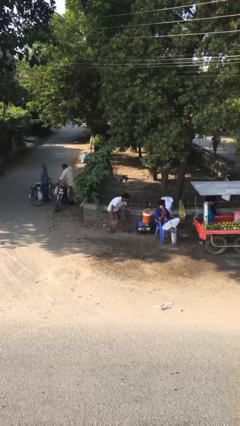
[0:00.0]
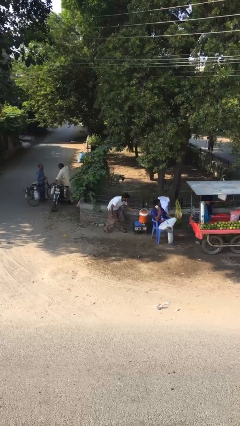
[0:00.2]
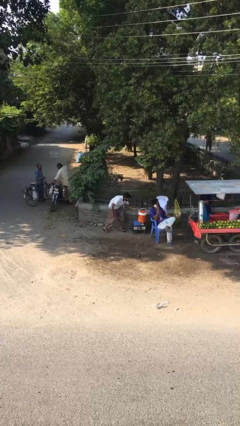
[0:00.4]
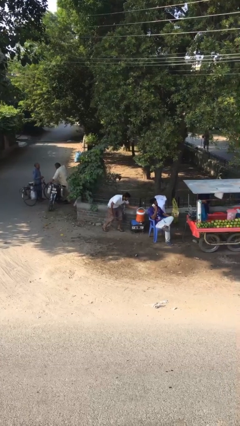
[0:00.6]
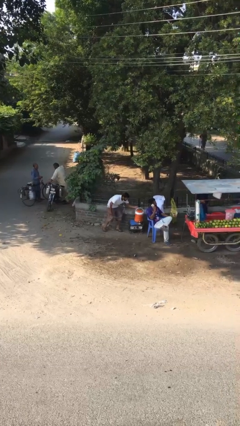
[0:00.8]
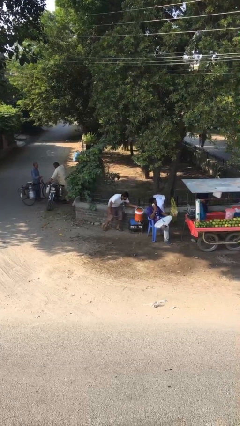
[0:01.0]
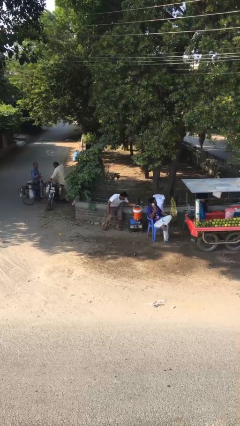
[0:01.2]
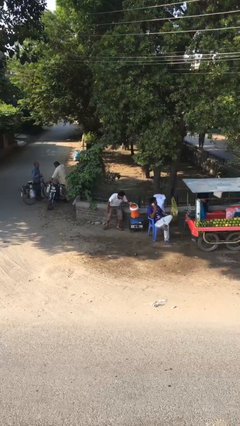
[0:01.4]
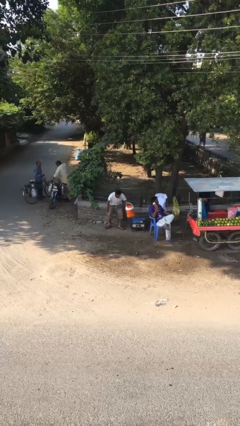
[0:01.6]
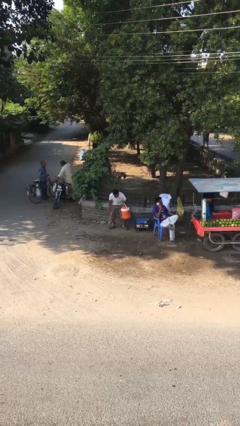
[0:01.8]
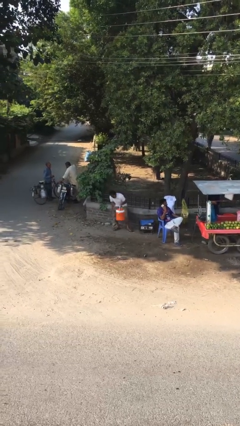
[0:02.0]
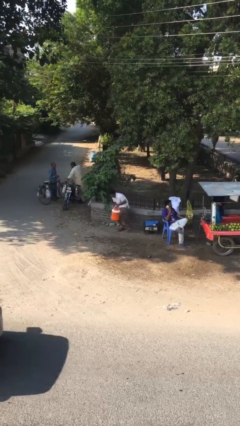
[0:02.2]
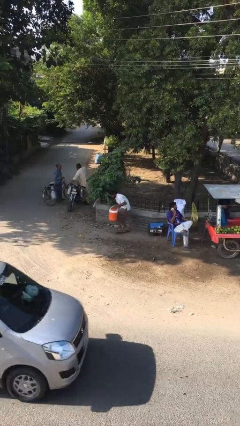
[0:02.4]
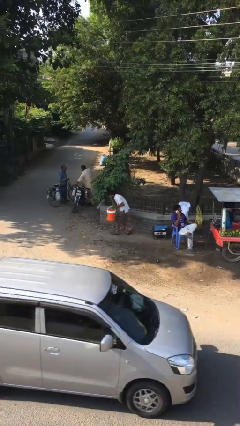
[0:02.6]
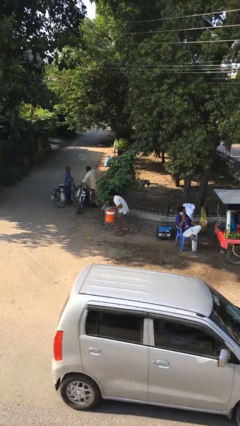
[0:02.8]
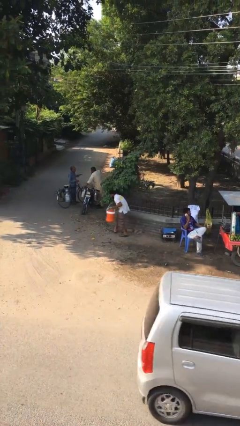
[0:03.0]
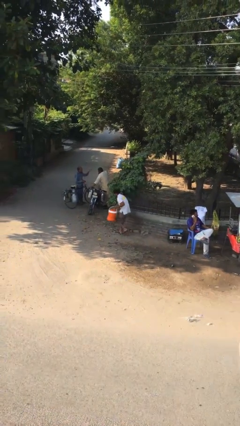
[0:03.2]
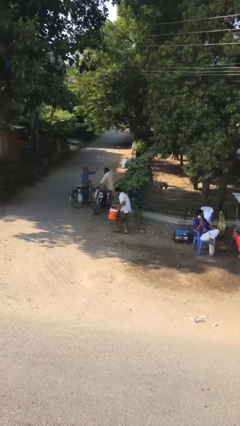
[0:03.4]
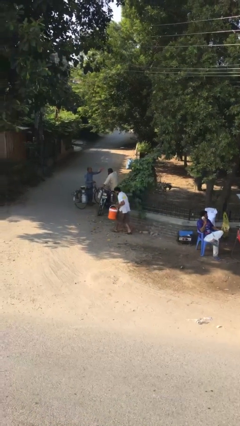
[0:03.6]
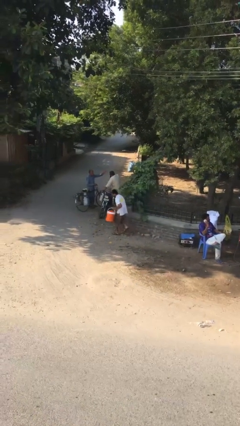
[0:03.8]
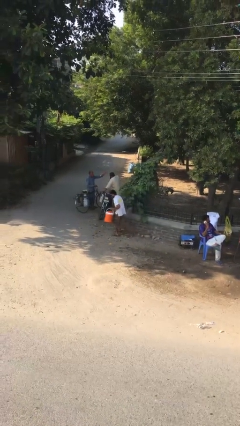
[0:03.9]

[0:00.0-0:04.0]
person steals object from person

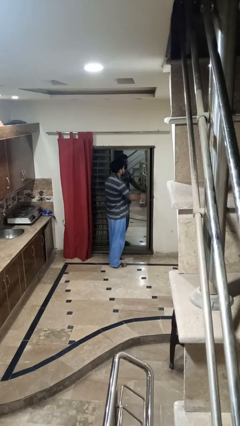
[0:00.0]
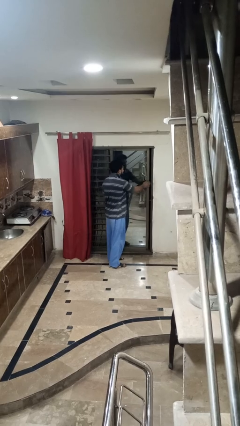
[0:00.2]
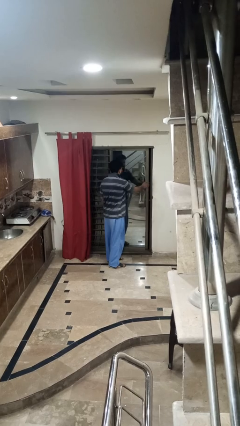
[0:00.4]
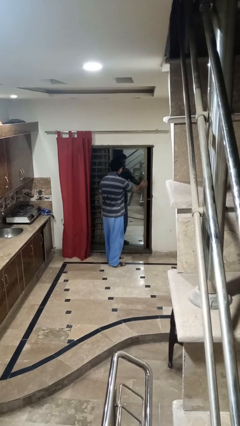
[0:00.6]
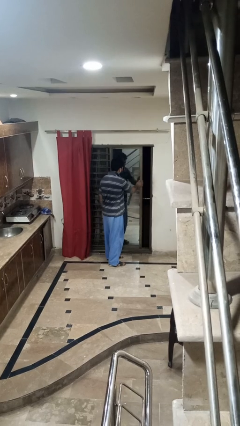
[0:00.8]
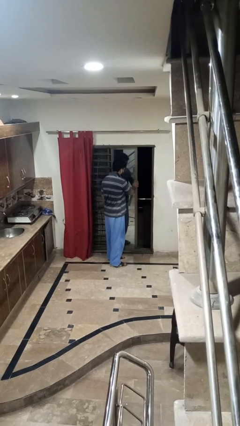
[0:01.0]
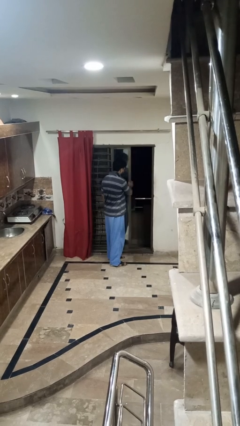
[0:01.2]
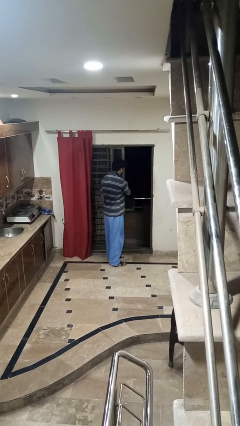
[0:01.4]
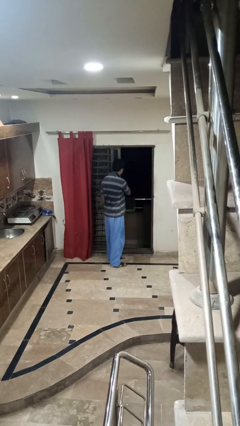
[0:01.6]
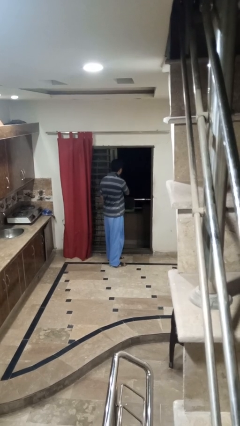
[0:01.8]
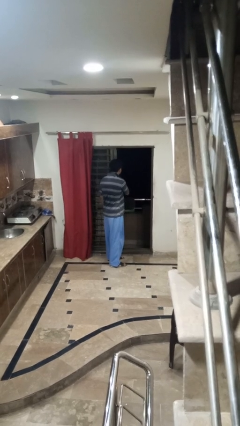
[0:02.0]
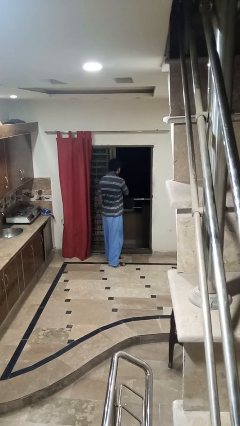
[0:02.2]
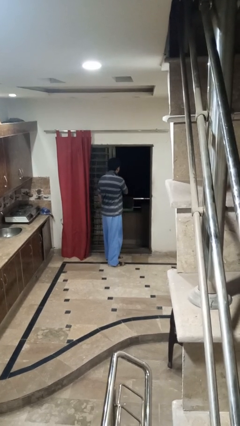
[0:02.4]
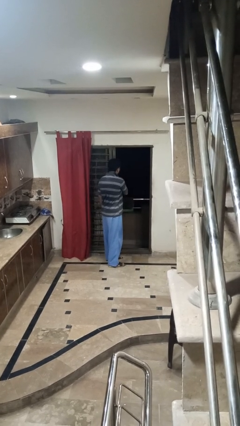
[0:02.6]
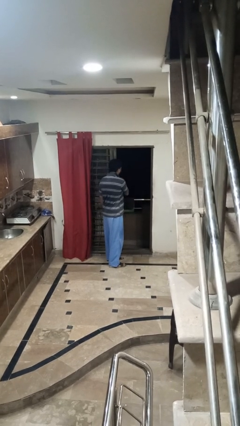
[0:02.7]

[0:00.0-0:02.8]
person opens sliding door

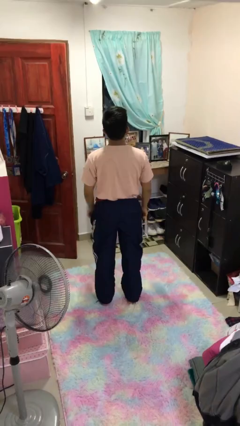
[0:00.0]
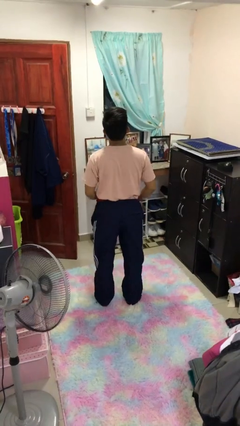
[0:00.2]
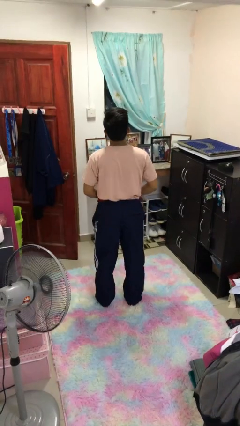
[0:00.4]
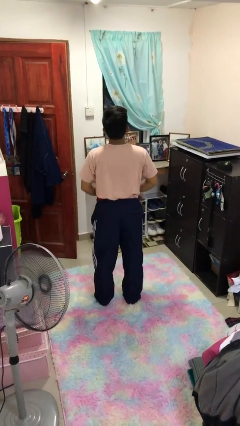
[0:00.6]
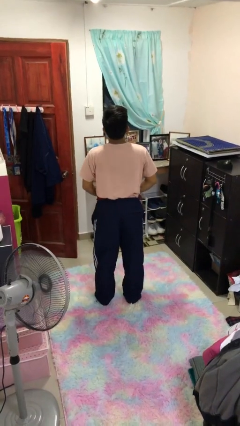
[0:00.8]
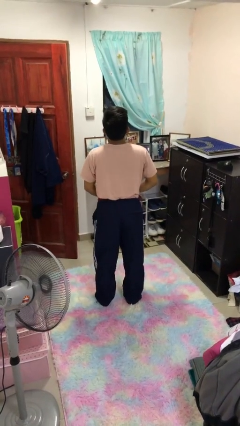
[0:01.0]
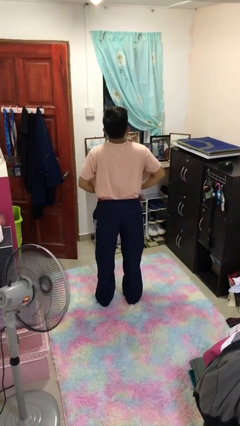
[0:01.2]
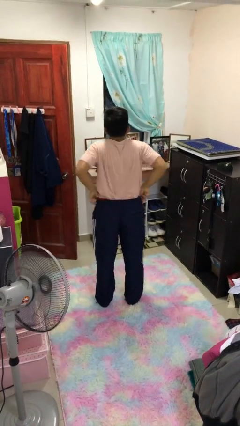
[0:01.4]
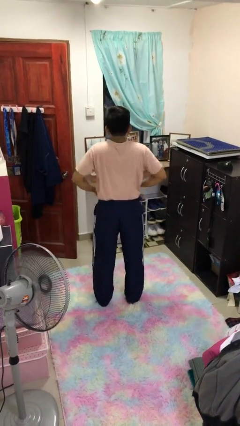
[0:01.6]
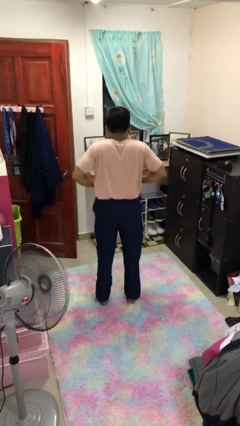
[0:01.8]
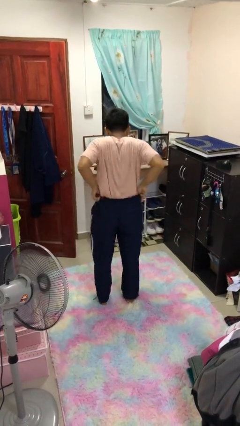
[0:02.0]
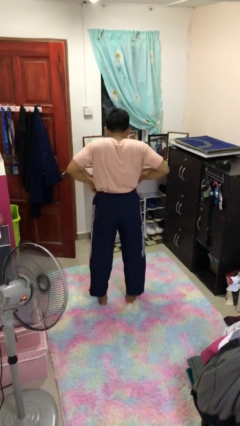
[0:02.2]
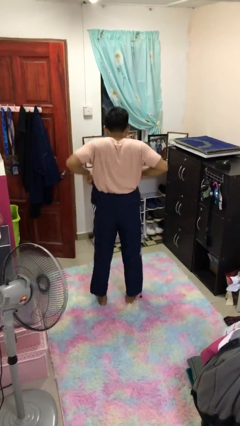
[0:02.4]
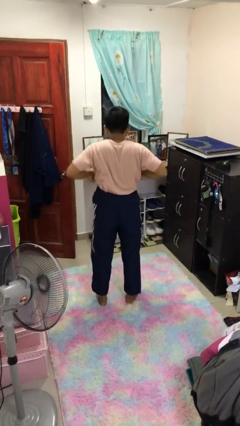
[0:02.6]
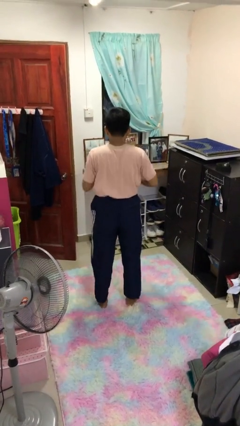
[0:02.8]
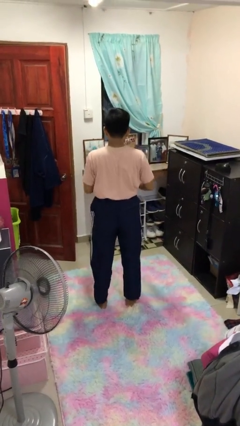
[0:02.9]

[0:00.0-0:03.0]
person hikes up pants

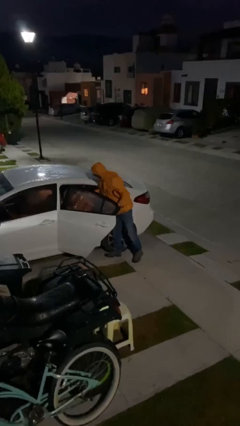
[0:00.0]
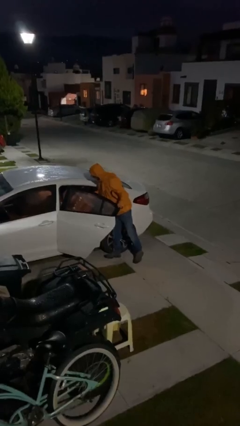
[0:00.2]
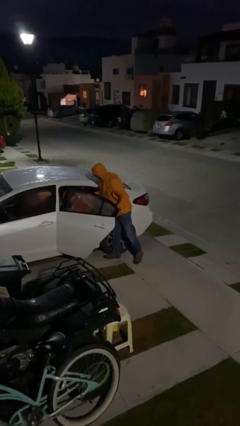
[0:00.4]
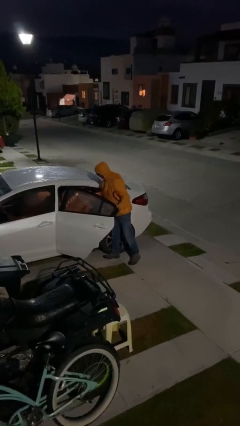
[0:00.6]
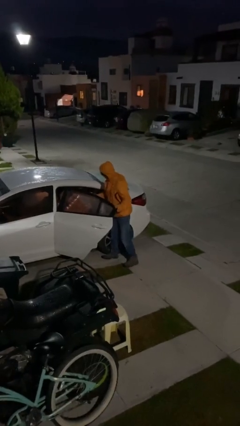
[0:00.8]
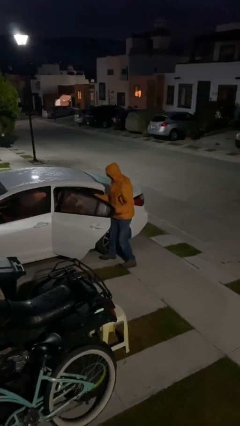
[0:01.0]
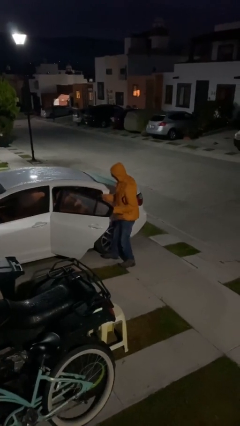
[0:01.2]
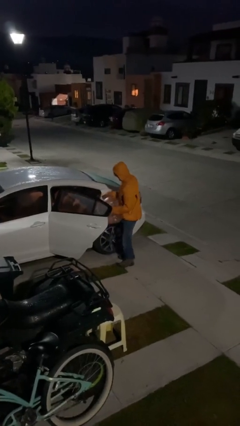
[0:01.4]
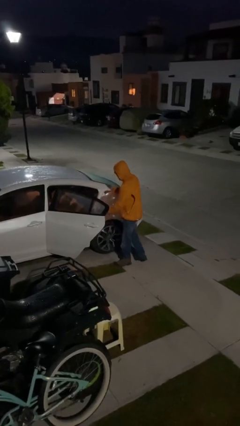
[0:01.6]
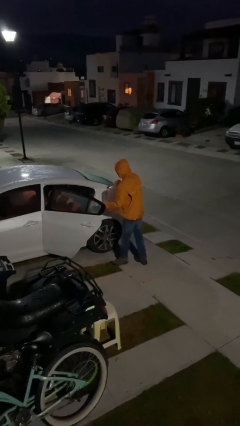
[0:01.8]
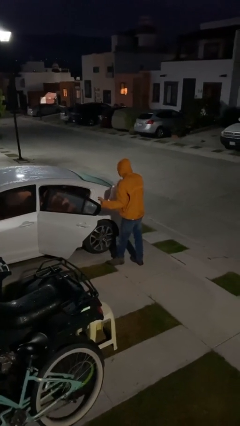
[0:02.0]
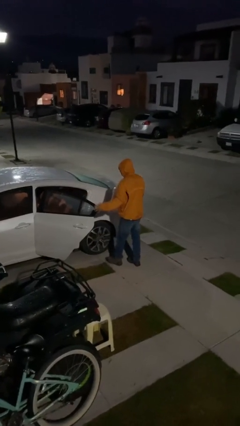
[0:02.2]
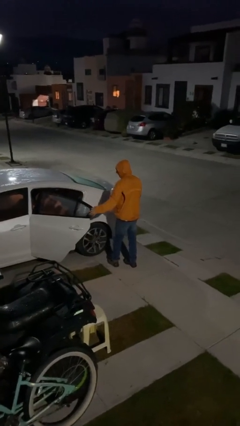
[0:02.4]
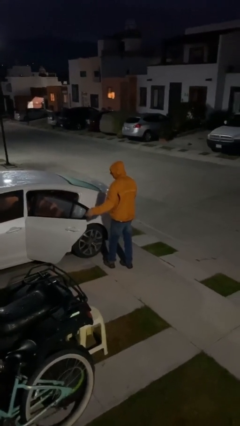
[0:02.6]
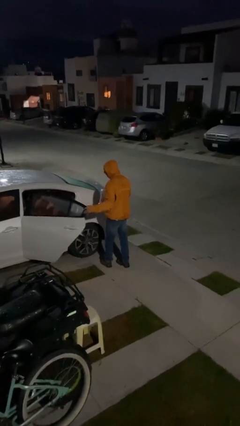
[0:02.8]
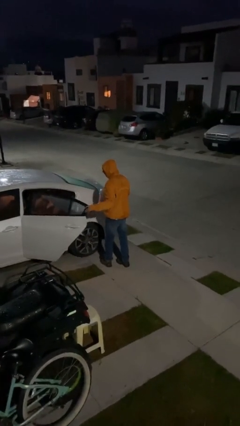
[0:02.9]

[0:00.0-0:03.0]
person unloads car

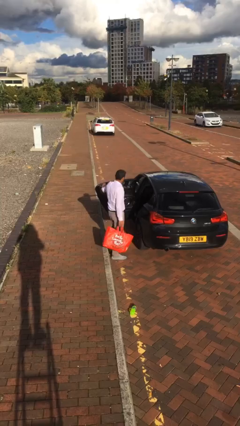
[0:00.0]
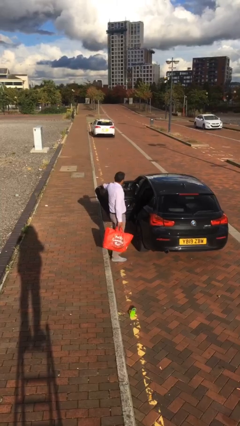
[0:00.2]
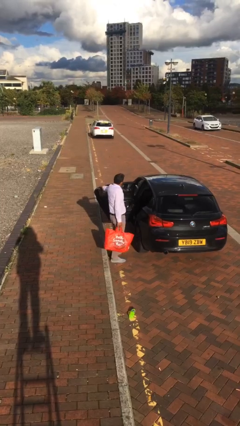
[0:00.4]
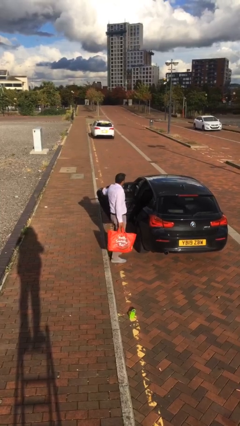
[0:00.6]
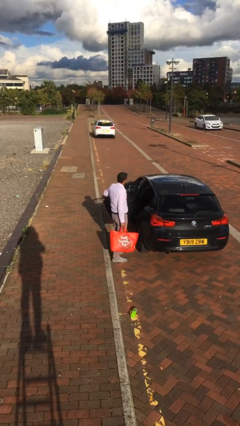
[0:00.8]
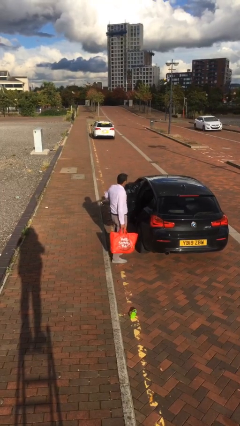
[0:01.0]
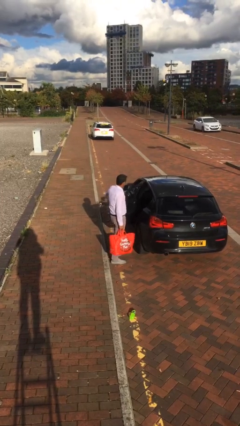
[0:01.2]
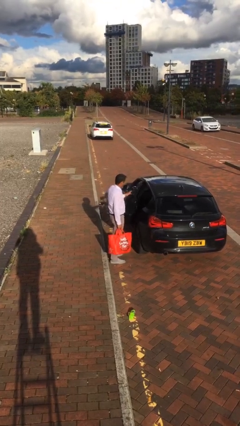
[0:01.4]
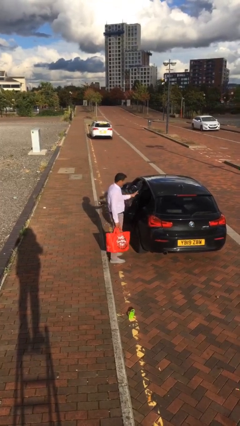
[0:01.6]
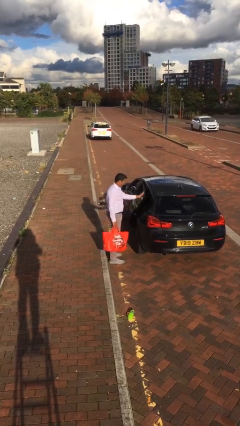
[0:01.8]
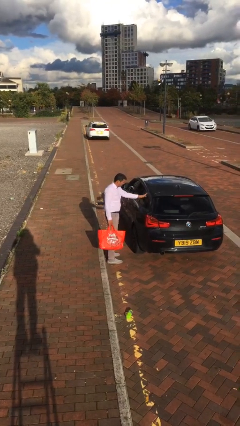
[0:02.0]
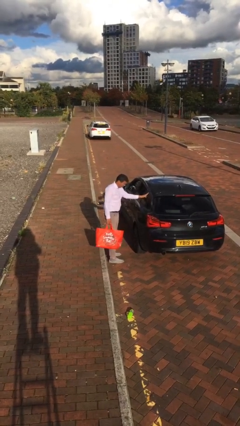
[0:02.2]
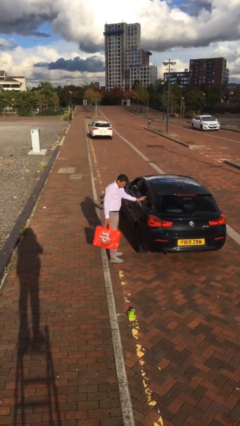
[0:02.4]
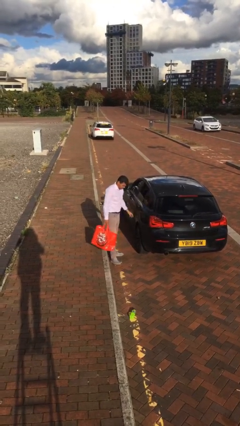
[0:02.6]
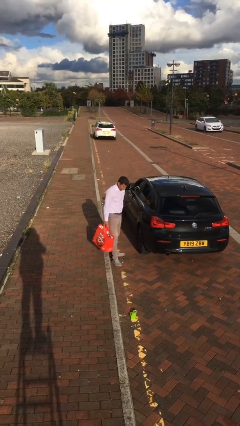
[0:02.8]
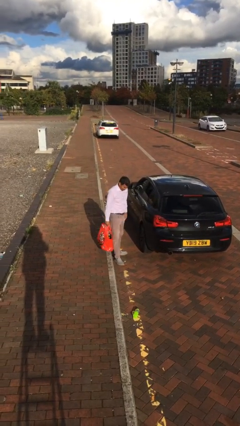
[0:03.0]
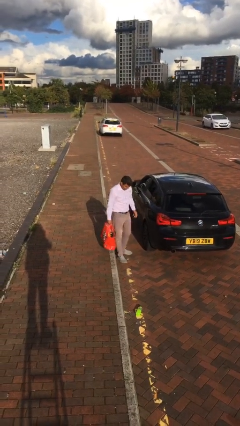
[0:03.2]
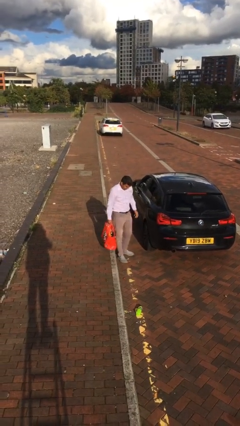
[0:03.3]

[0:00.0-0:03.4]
person closes car door

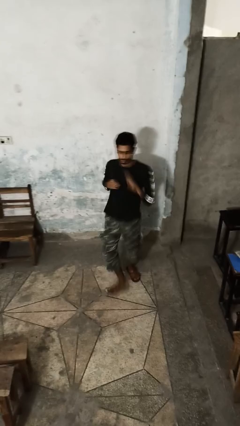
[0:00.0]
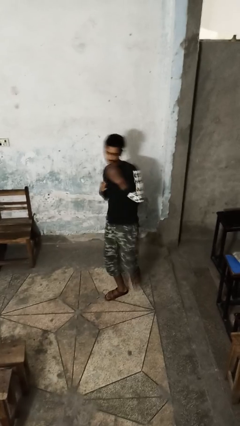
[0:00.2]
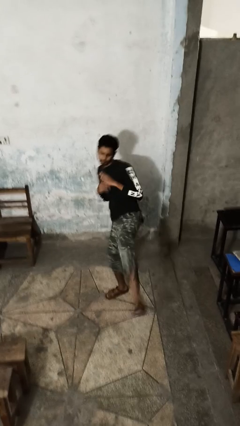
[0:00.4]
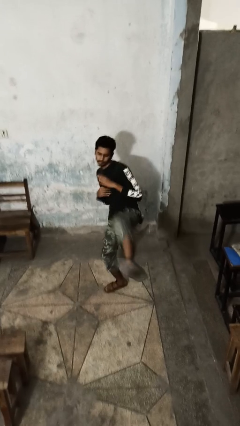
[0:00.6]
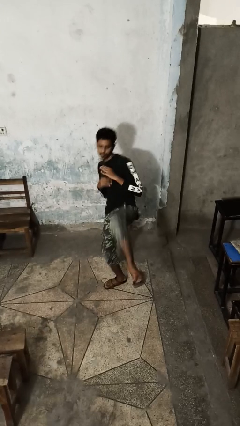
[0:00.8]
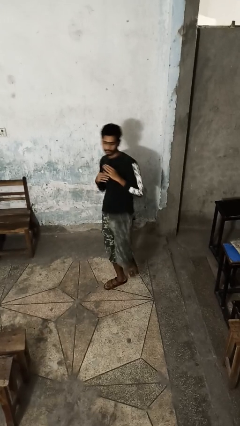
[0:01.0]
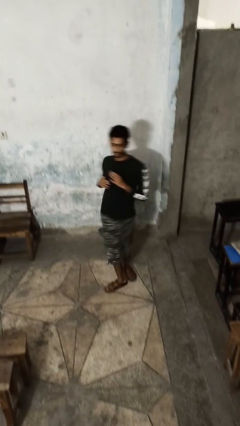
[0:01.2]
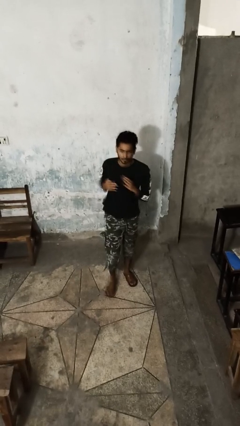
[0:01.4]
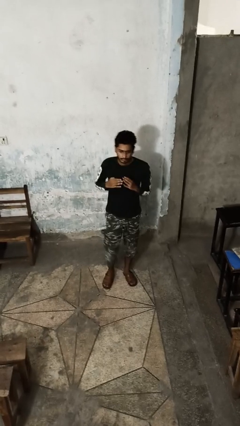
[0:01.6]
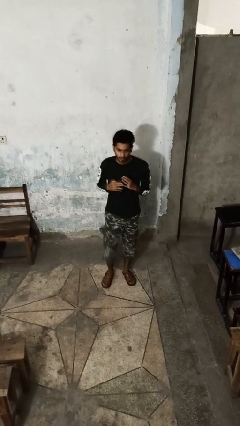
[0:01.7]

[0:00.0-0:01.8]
person karate kicks
